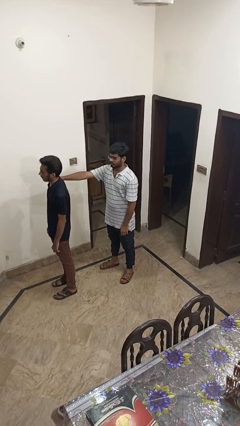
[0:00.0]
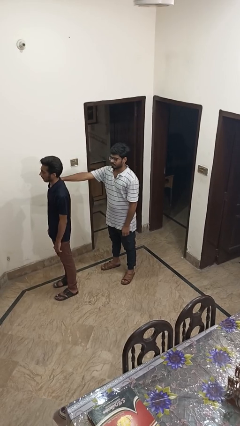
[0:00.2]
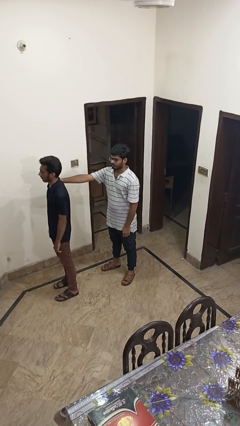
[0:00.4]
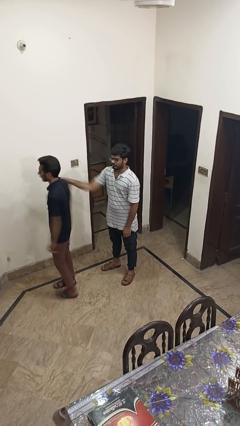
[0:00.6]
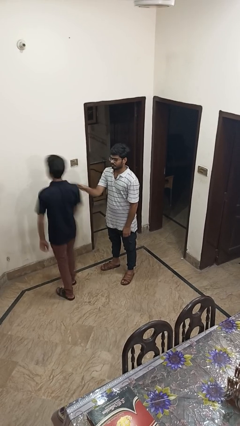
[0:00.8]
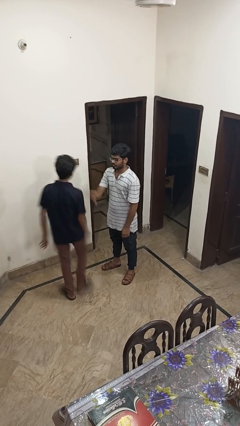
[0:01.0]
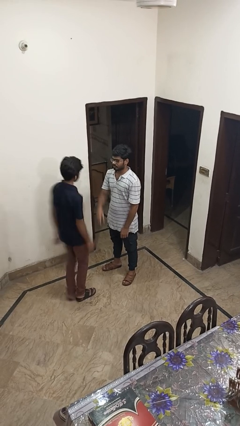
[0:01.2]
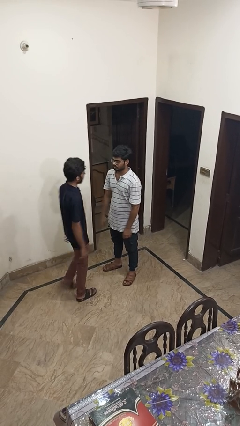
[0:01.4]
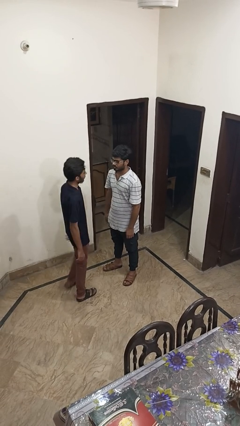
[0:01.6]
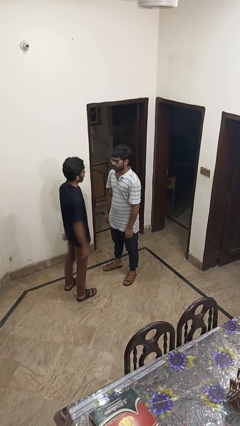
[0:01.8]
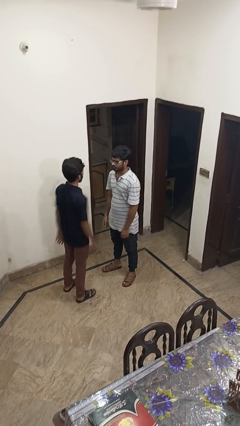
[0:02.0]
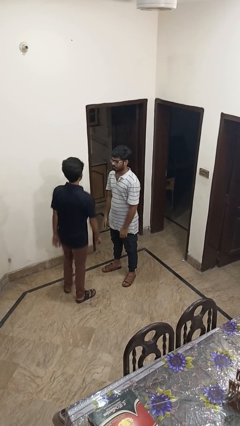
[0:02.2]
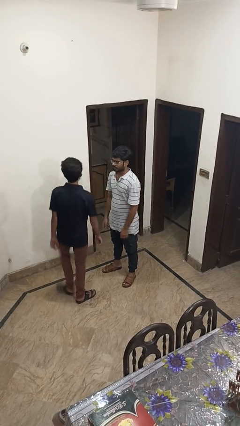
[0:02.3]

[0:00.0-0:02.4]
person spins person around

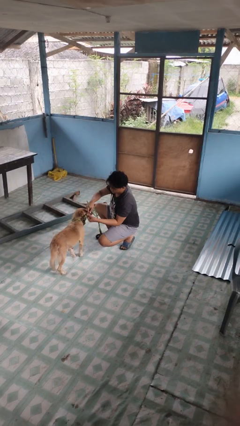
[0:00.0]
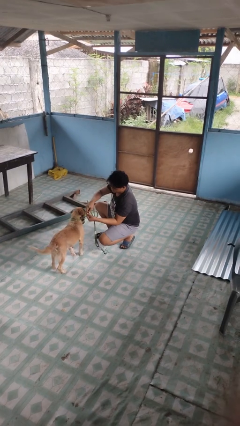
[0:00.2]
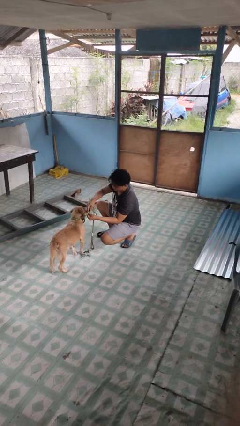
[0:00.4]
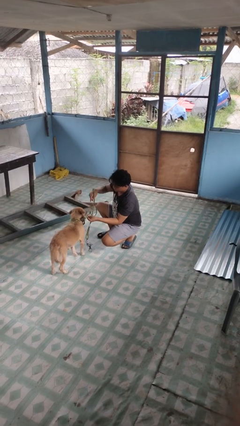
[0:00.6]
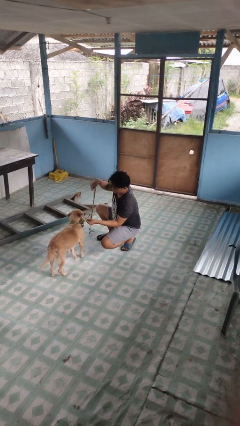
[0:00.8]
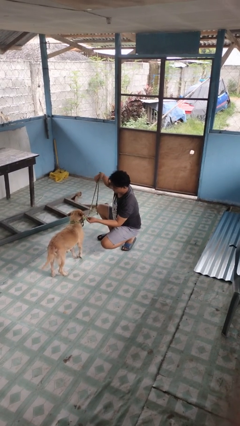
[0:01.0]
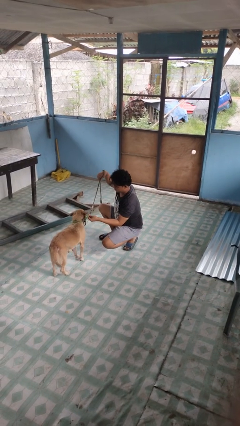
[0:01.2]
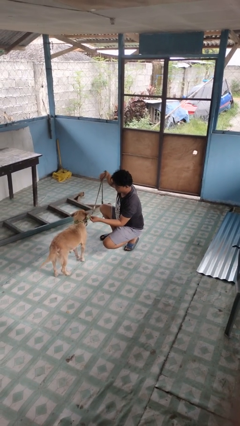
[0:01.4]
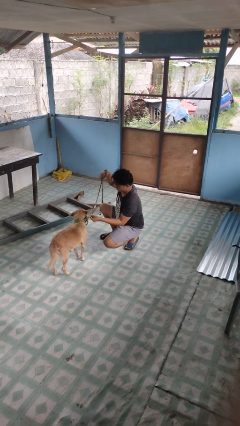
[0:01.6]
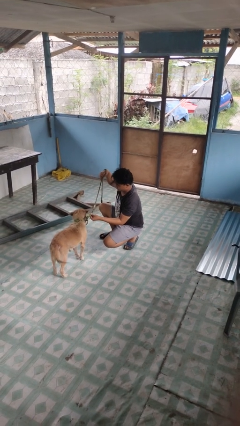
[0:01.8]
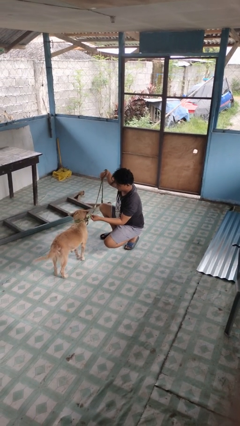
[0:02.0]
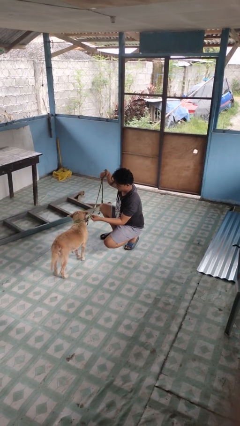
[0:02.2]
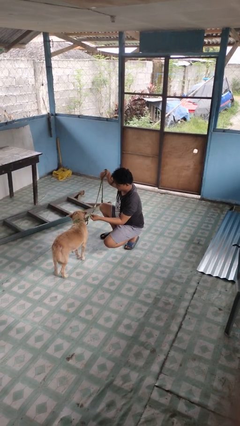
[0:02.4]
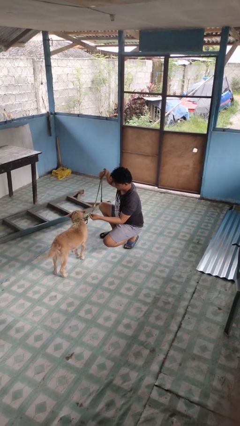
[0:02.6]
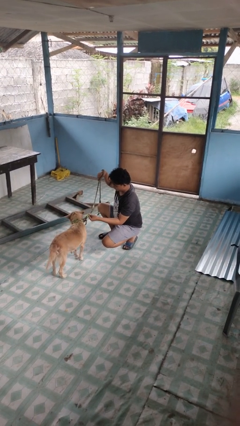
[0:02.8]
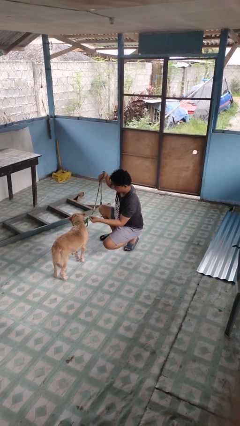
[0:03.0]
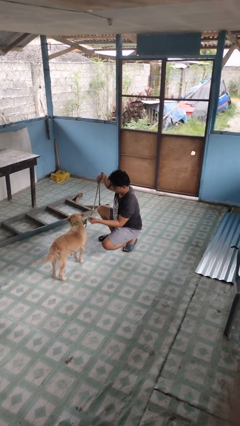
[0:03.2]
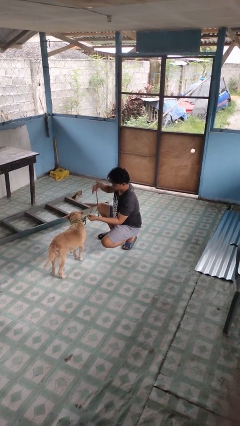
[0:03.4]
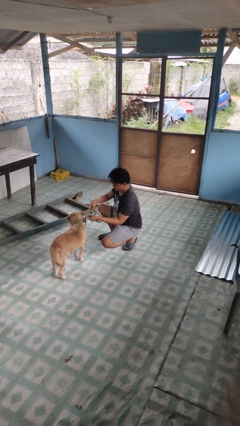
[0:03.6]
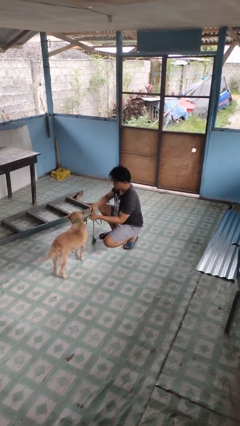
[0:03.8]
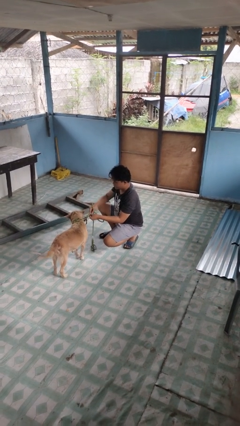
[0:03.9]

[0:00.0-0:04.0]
person attaches leash to dog

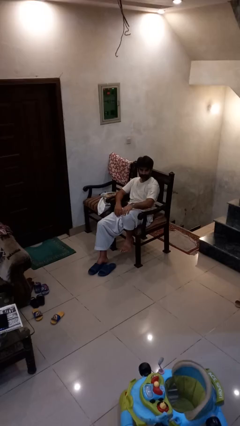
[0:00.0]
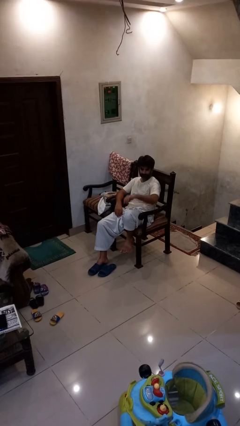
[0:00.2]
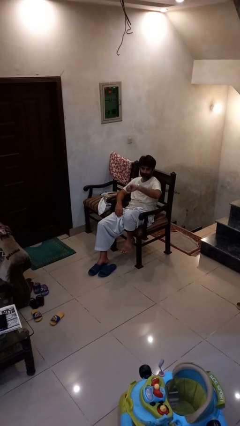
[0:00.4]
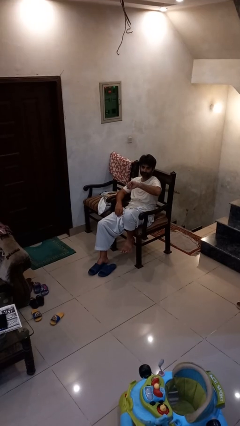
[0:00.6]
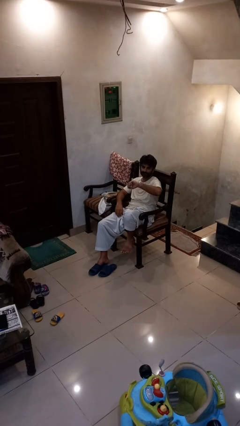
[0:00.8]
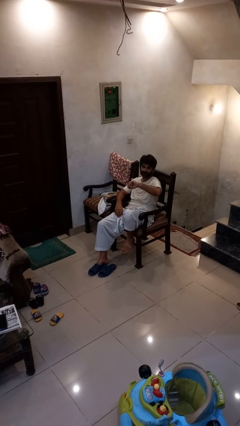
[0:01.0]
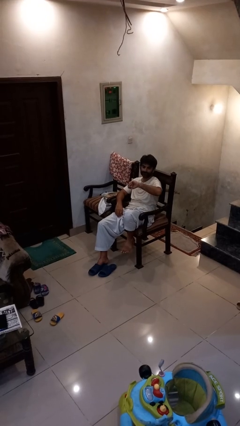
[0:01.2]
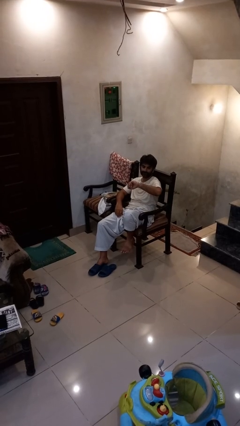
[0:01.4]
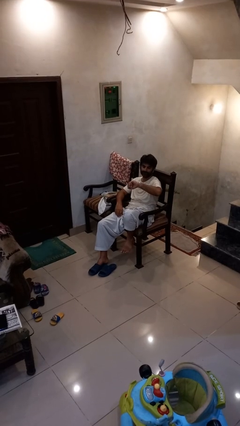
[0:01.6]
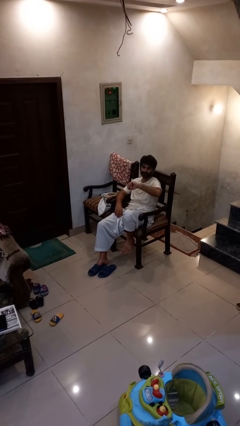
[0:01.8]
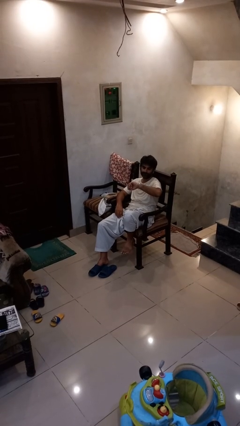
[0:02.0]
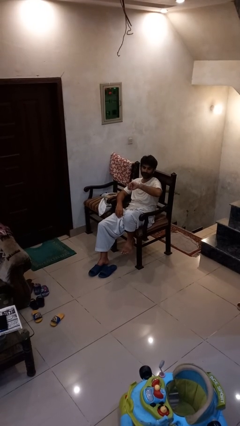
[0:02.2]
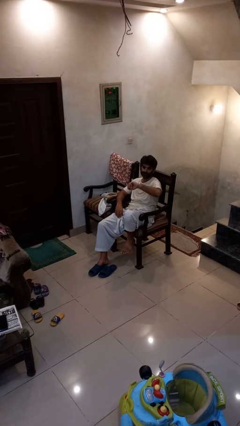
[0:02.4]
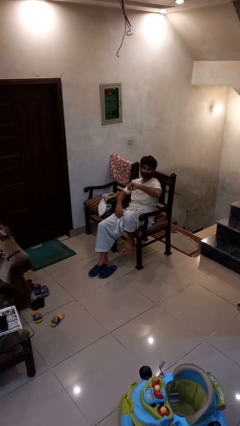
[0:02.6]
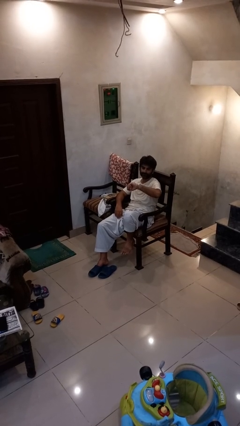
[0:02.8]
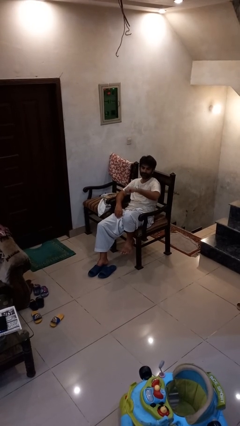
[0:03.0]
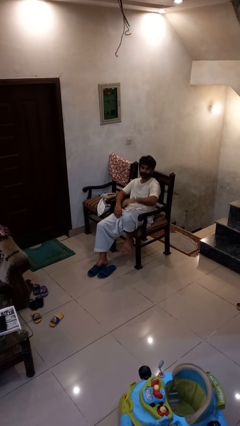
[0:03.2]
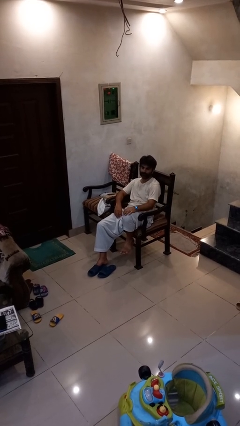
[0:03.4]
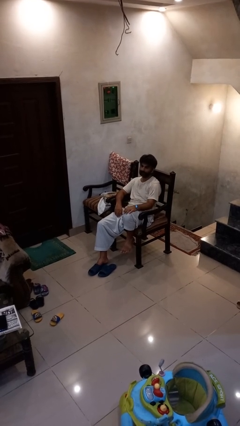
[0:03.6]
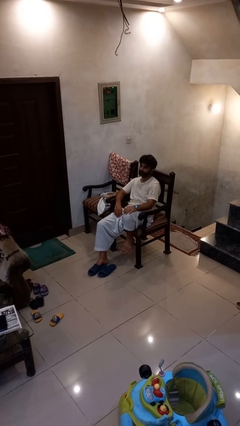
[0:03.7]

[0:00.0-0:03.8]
person looks at wristwatch

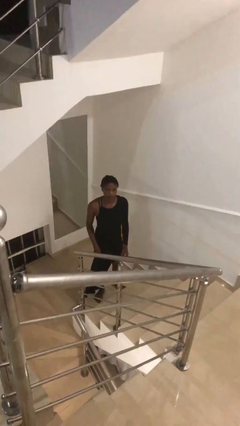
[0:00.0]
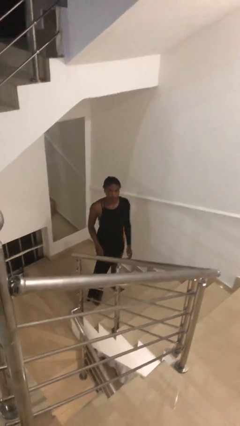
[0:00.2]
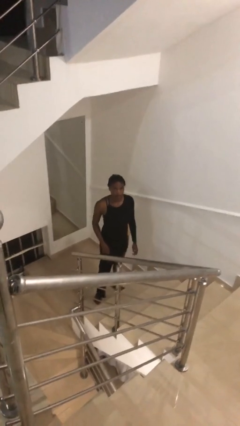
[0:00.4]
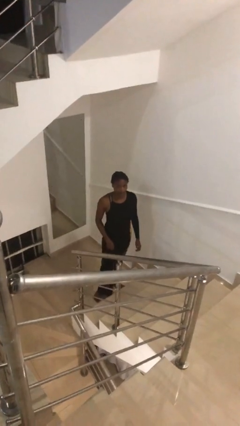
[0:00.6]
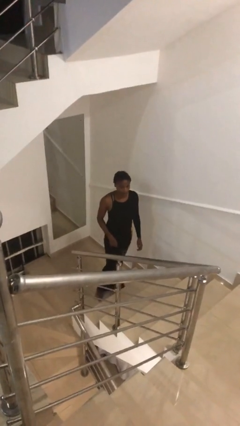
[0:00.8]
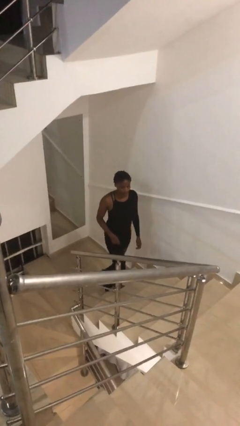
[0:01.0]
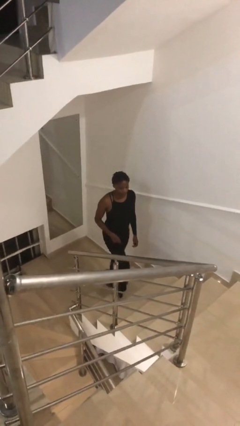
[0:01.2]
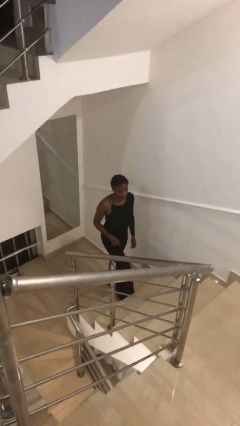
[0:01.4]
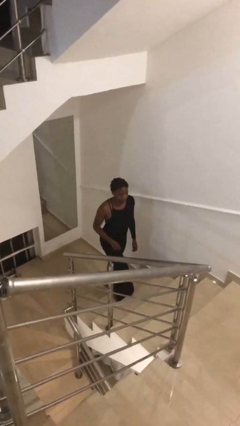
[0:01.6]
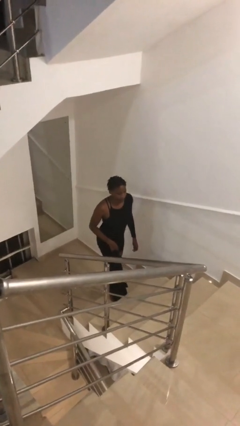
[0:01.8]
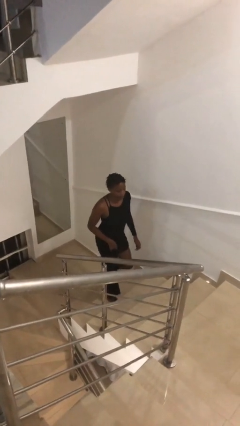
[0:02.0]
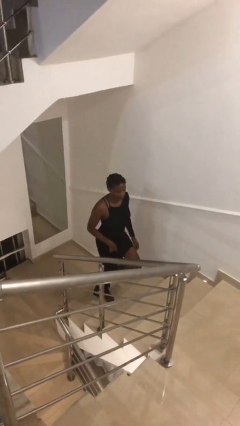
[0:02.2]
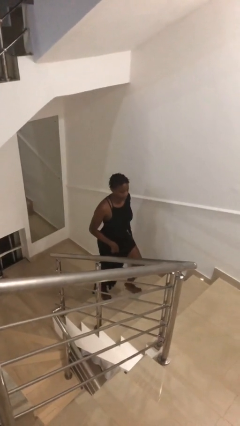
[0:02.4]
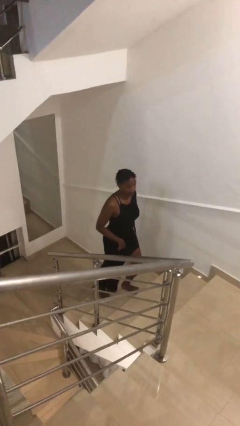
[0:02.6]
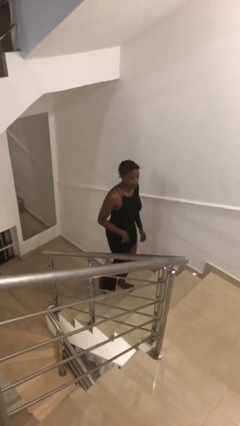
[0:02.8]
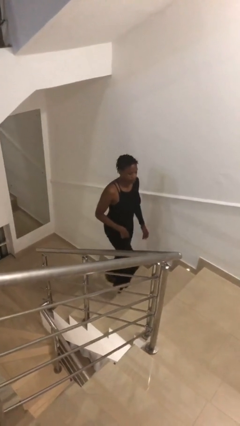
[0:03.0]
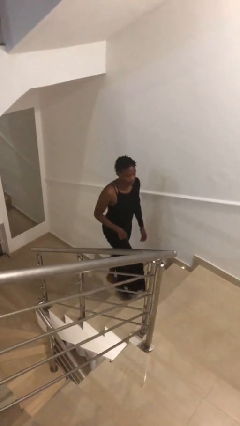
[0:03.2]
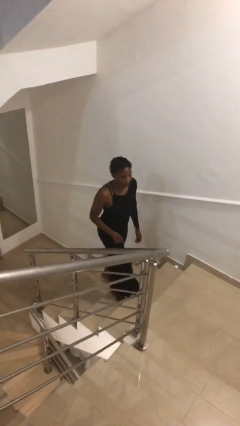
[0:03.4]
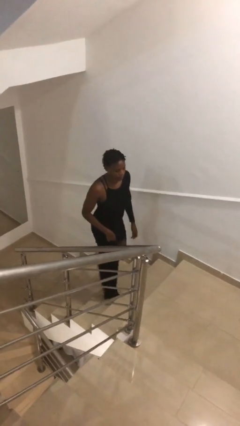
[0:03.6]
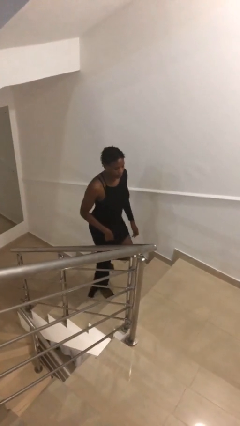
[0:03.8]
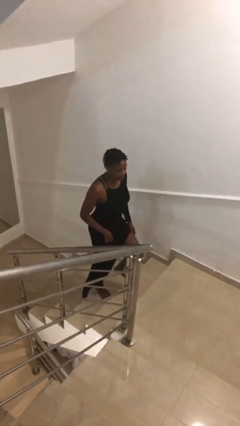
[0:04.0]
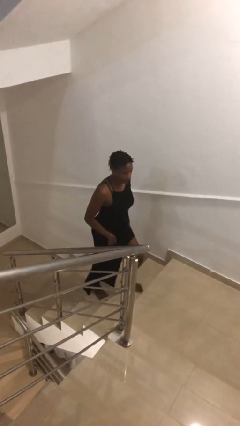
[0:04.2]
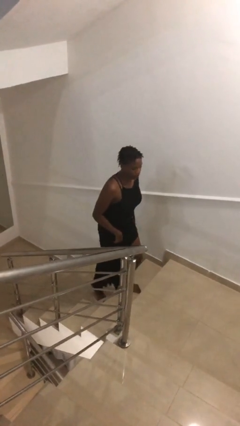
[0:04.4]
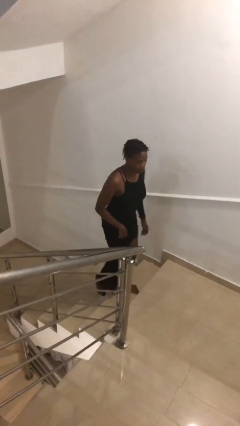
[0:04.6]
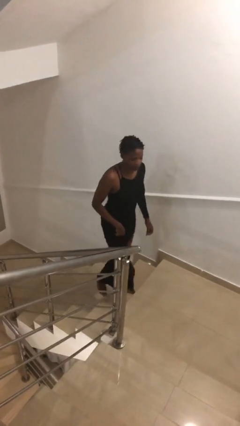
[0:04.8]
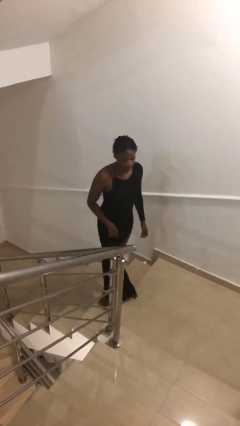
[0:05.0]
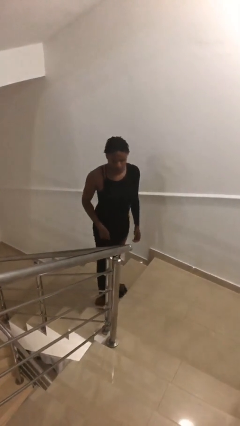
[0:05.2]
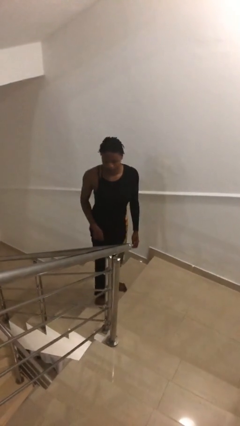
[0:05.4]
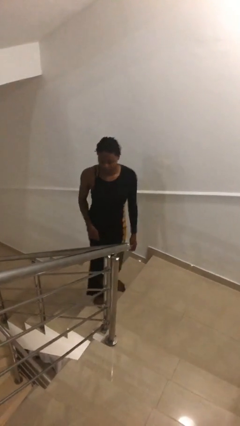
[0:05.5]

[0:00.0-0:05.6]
person climbs up stairs

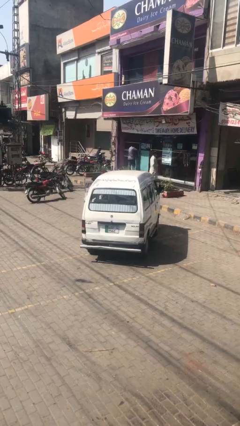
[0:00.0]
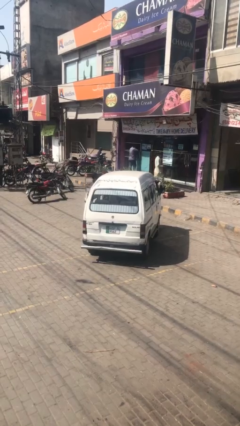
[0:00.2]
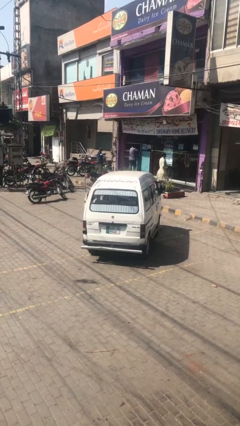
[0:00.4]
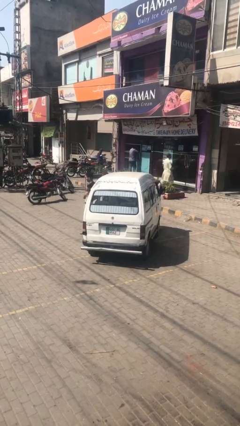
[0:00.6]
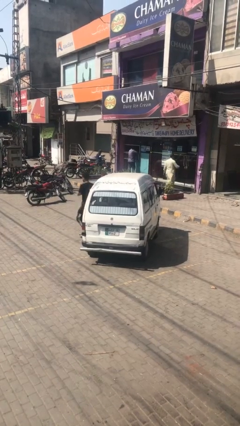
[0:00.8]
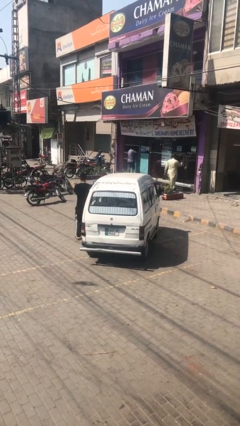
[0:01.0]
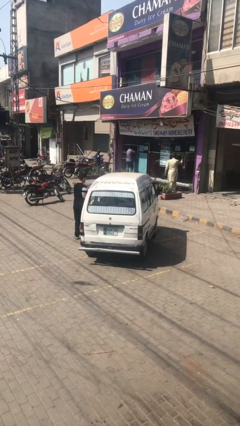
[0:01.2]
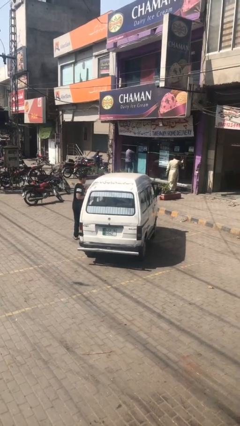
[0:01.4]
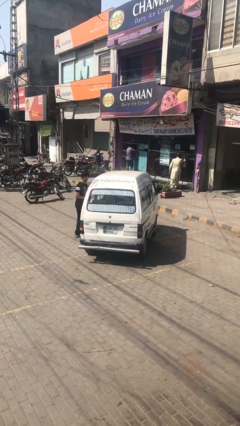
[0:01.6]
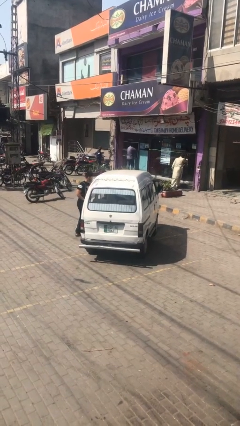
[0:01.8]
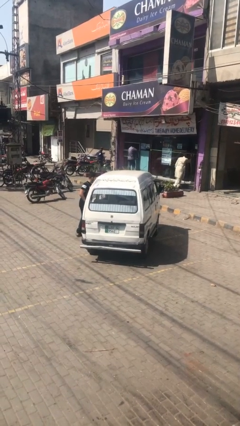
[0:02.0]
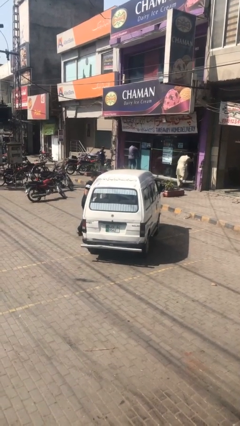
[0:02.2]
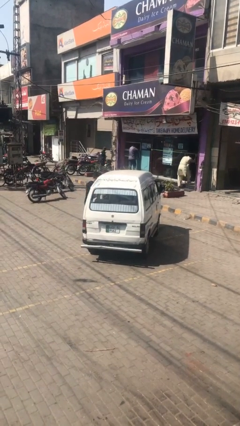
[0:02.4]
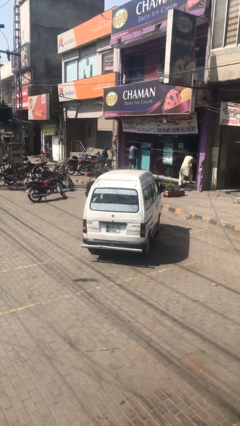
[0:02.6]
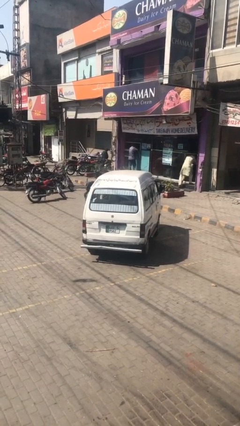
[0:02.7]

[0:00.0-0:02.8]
car drops off person
